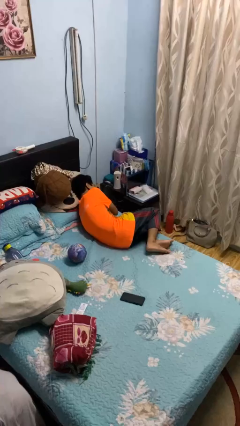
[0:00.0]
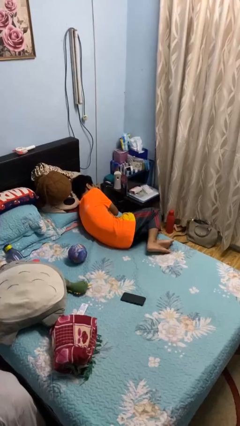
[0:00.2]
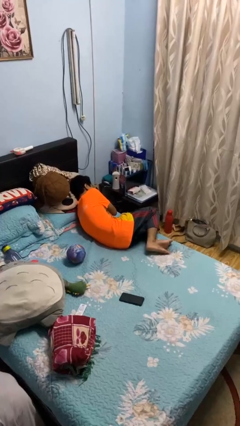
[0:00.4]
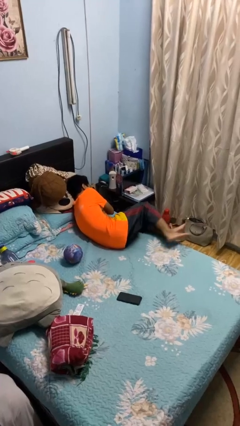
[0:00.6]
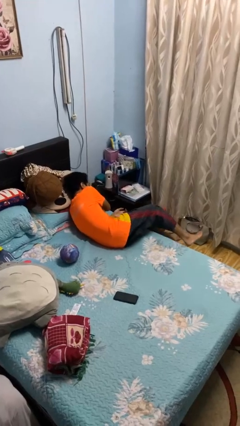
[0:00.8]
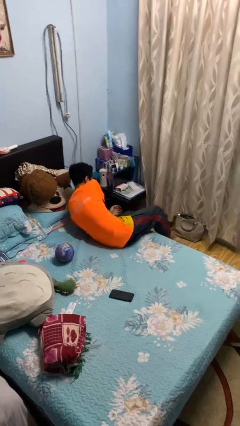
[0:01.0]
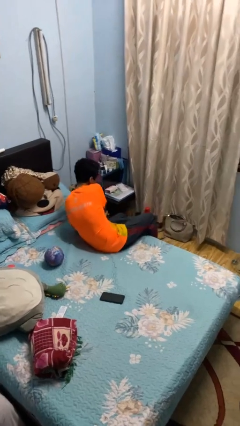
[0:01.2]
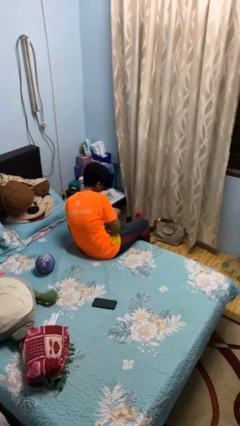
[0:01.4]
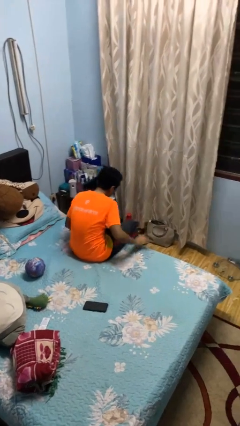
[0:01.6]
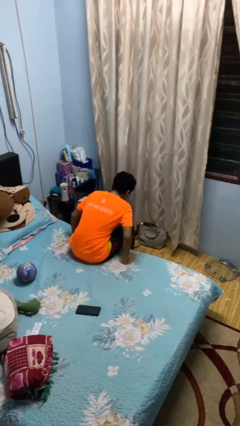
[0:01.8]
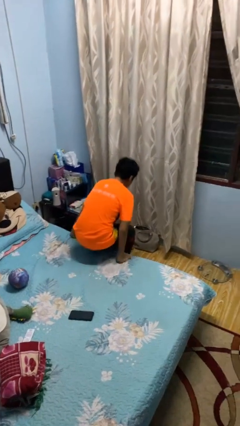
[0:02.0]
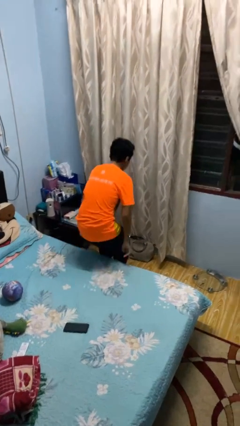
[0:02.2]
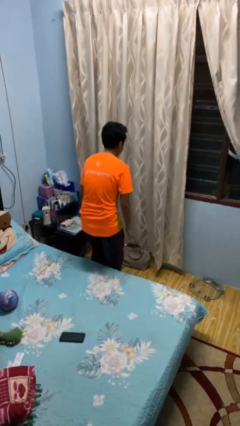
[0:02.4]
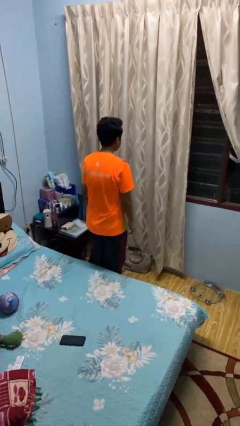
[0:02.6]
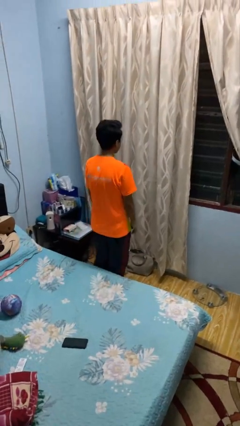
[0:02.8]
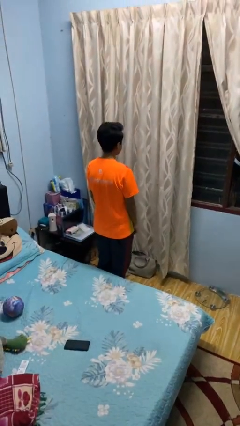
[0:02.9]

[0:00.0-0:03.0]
person stands up

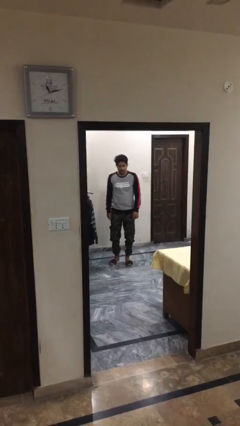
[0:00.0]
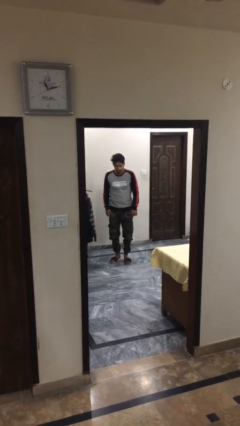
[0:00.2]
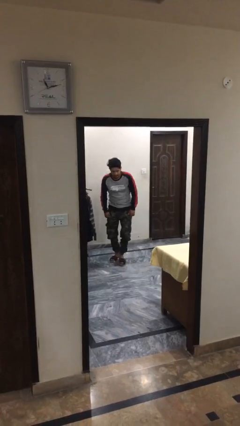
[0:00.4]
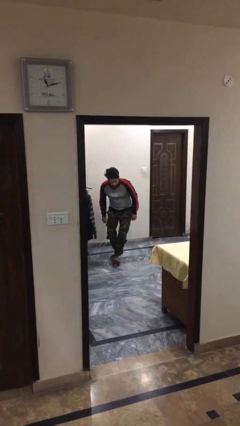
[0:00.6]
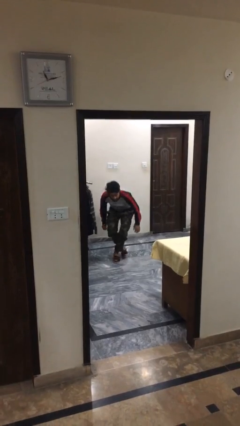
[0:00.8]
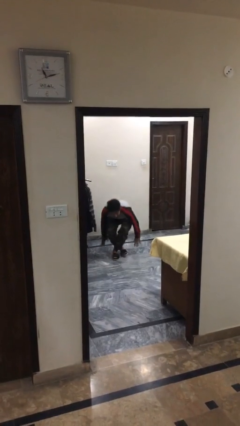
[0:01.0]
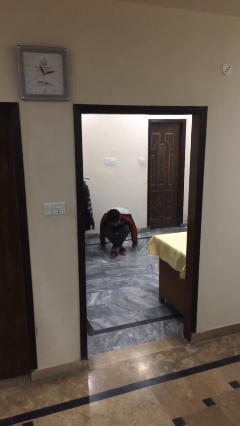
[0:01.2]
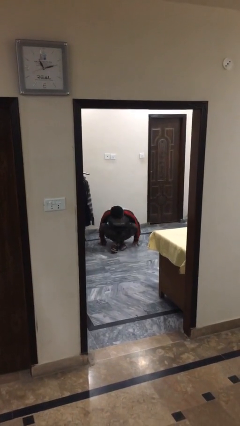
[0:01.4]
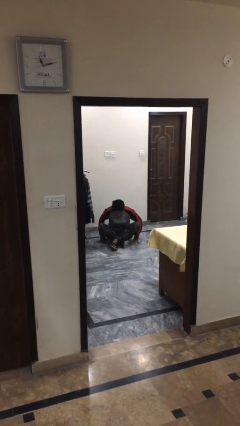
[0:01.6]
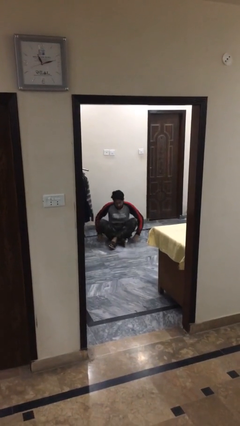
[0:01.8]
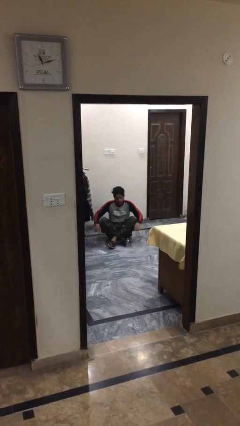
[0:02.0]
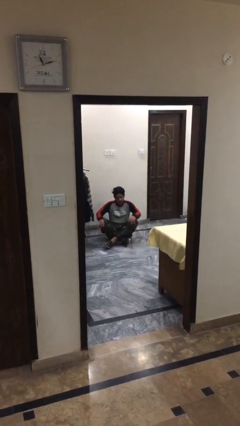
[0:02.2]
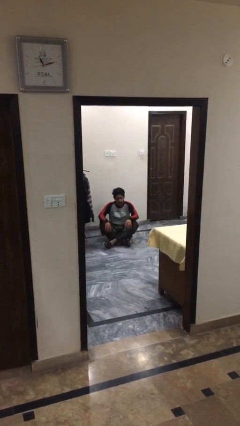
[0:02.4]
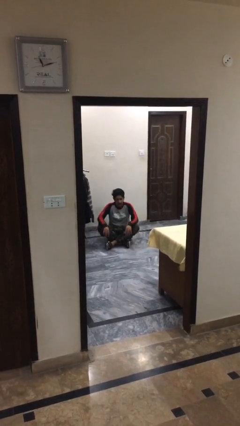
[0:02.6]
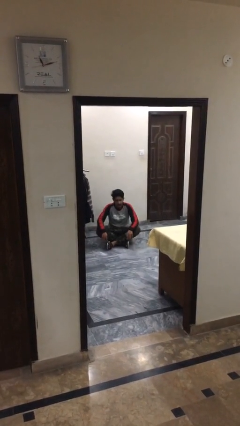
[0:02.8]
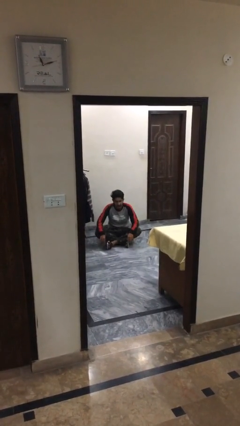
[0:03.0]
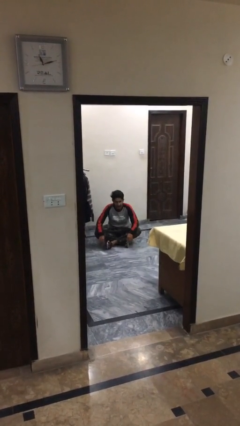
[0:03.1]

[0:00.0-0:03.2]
person sits down

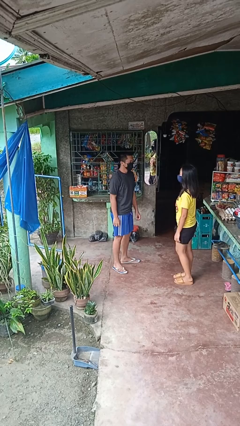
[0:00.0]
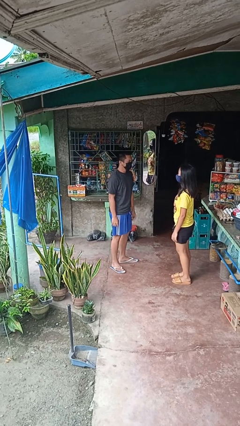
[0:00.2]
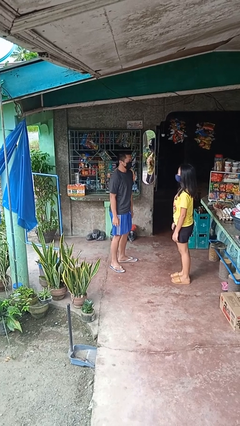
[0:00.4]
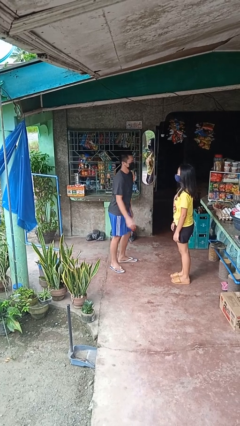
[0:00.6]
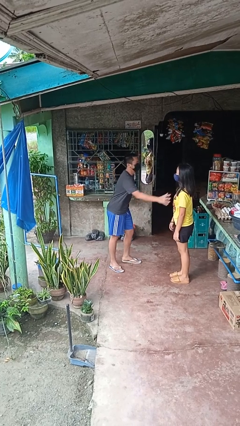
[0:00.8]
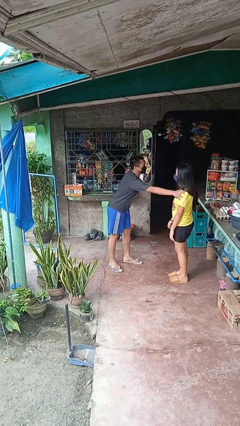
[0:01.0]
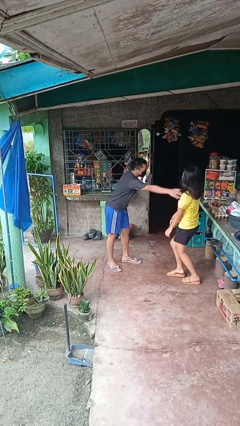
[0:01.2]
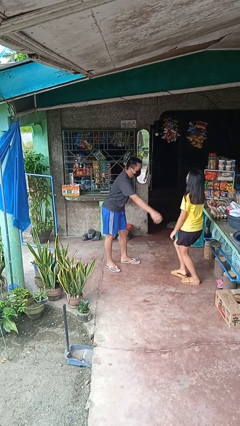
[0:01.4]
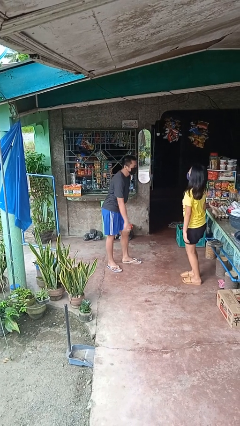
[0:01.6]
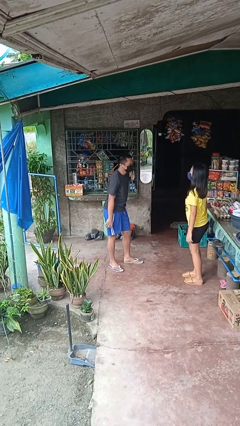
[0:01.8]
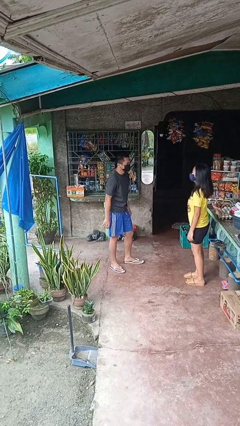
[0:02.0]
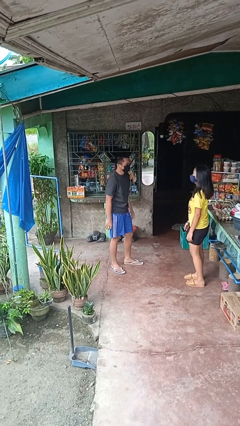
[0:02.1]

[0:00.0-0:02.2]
person shoves person

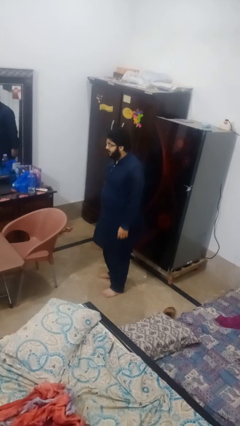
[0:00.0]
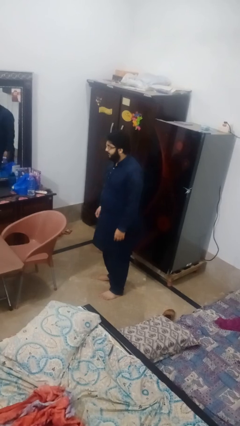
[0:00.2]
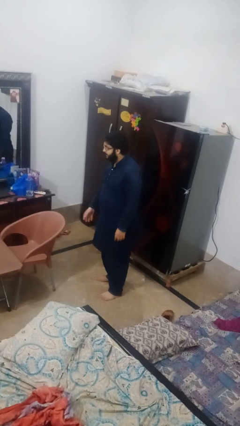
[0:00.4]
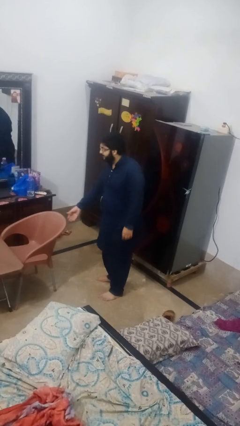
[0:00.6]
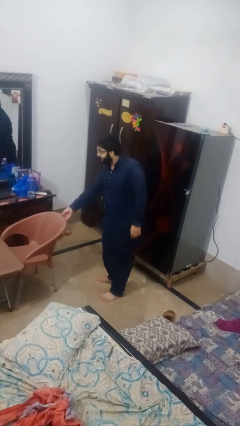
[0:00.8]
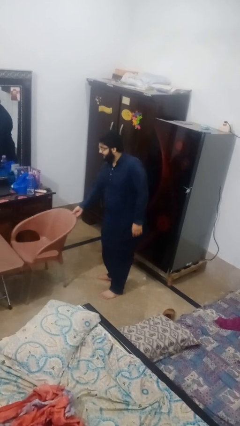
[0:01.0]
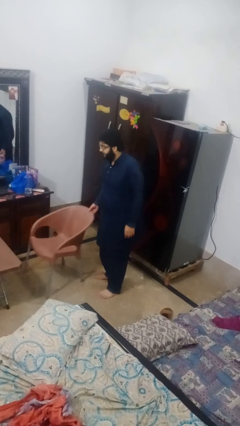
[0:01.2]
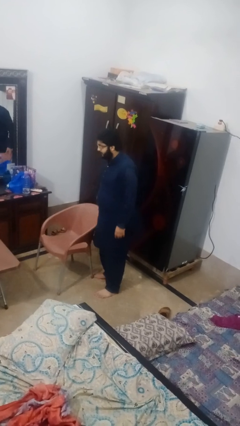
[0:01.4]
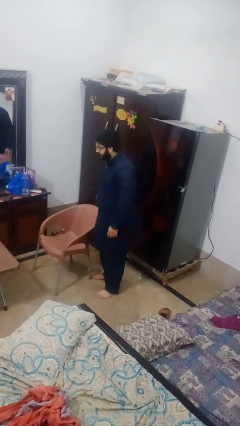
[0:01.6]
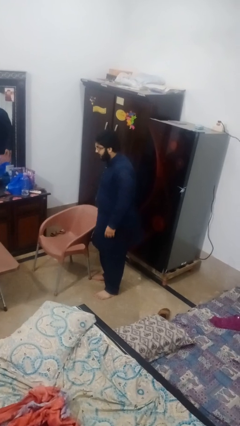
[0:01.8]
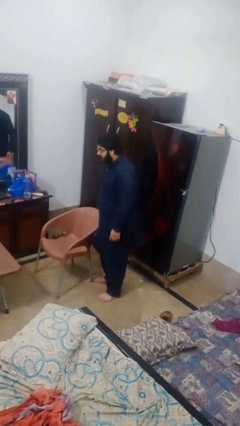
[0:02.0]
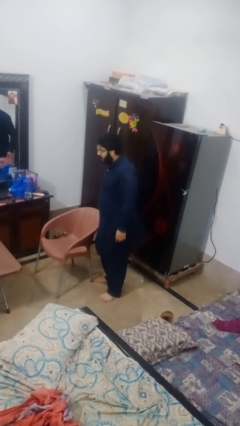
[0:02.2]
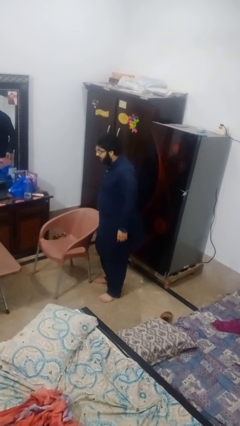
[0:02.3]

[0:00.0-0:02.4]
person pulls out chair

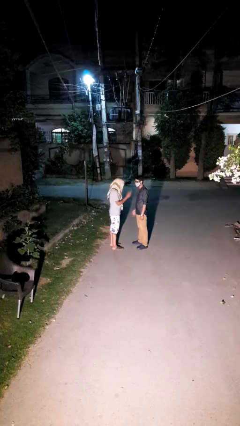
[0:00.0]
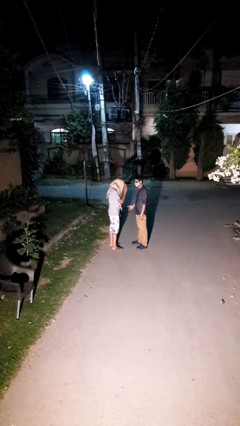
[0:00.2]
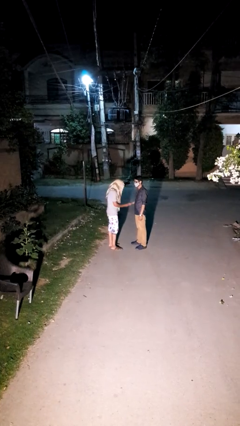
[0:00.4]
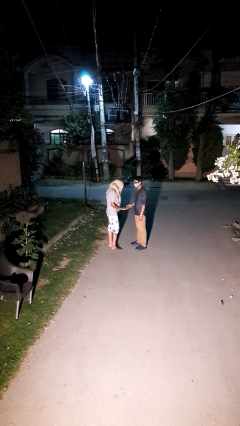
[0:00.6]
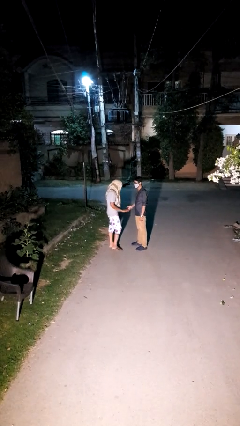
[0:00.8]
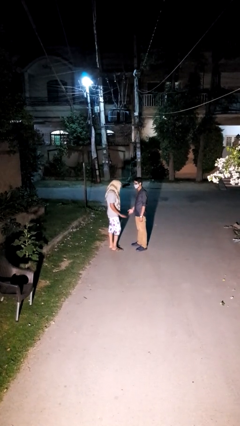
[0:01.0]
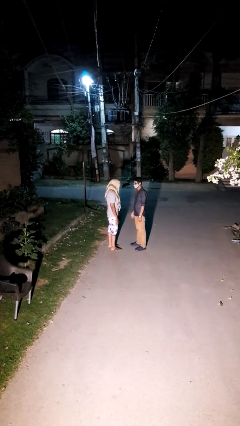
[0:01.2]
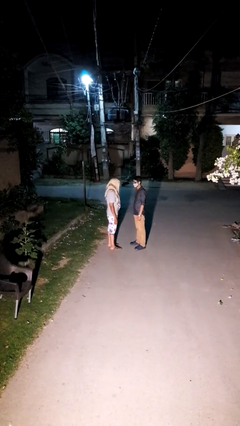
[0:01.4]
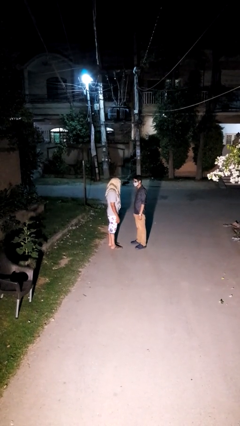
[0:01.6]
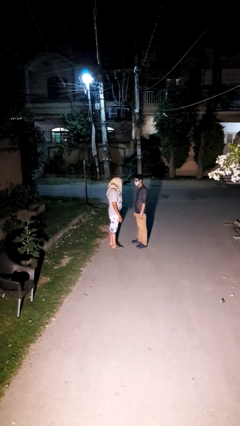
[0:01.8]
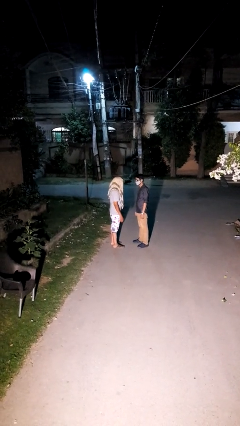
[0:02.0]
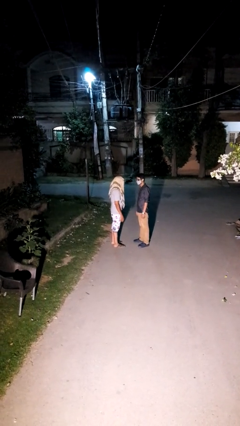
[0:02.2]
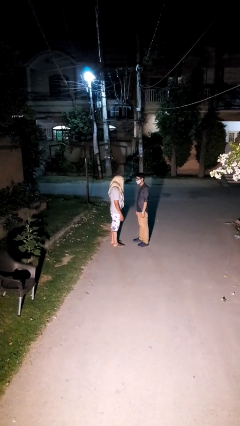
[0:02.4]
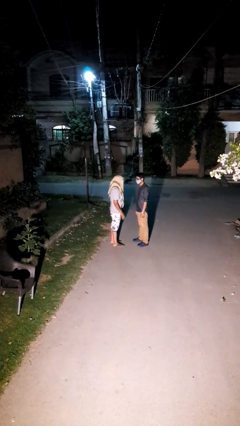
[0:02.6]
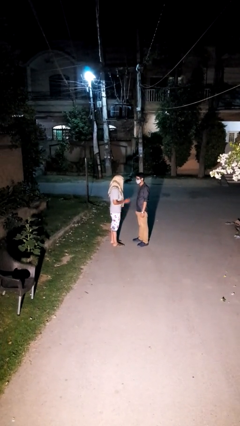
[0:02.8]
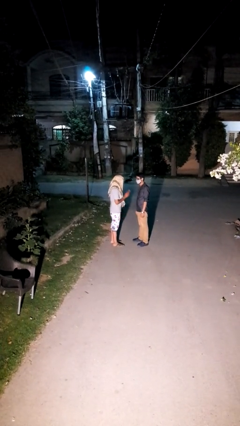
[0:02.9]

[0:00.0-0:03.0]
person highfives hand

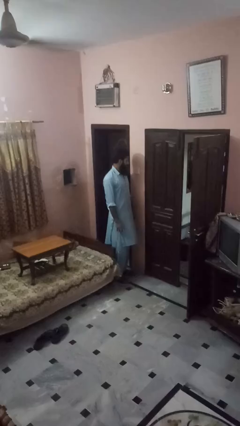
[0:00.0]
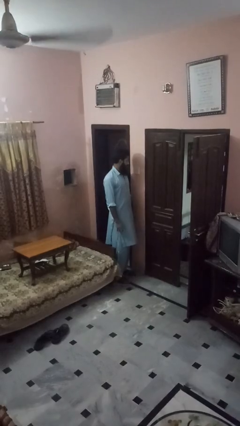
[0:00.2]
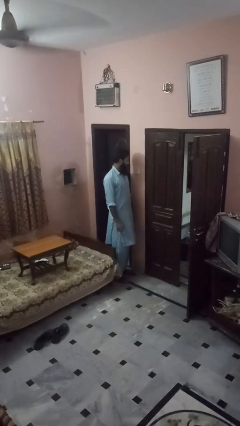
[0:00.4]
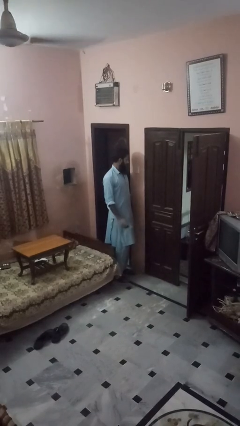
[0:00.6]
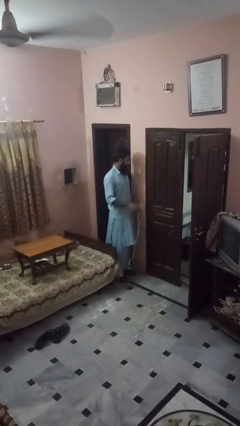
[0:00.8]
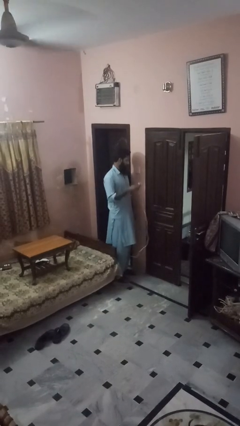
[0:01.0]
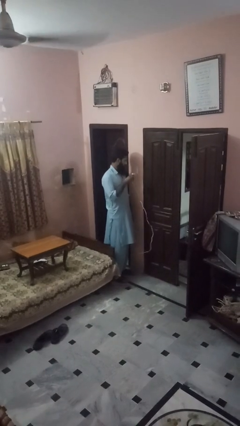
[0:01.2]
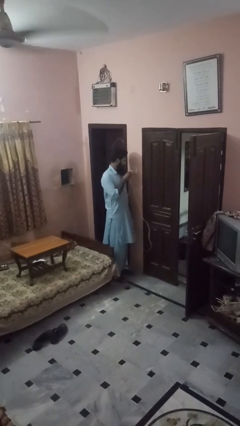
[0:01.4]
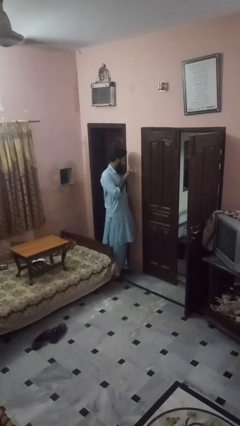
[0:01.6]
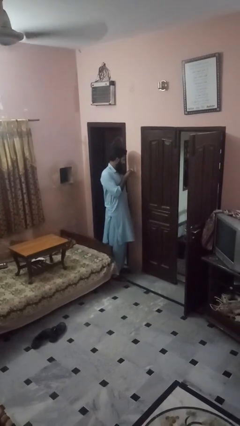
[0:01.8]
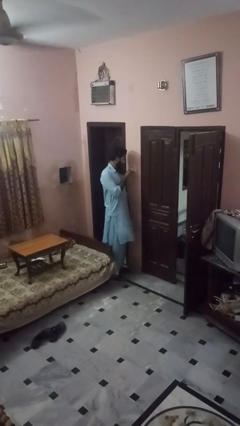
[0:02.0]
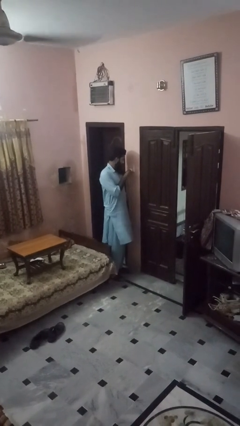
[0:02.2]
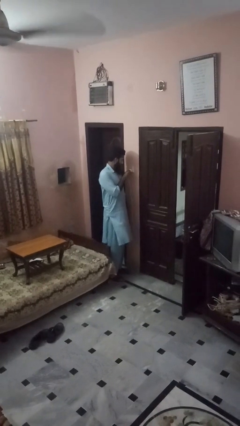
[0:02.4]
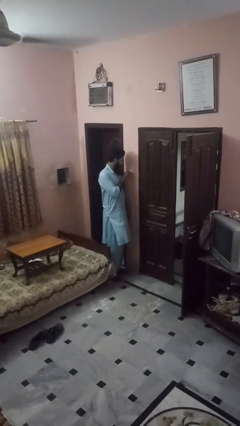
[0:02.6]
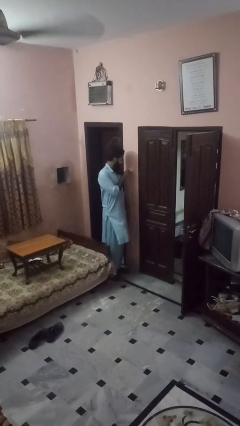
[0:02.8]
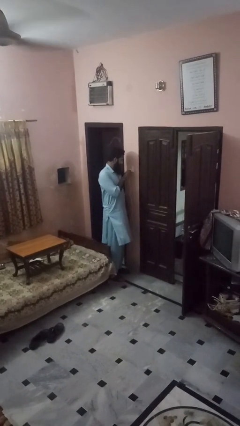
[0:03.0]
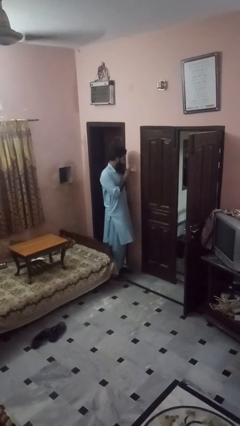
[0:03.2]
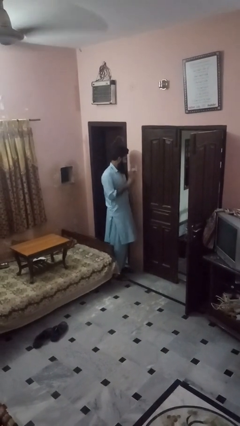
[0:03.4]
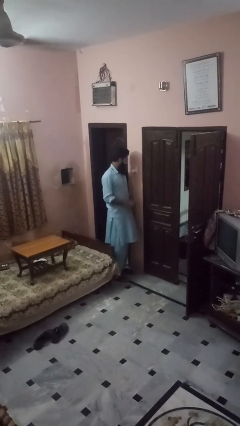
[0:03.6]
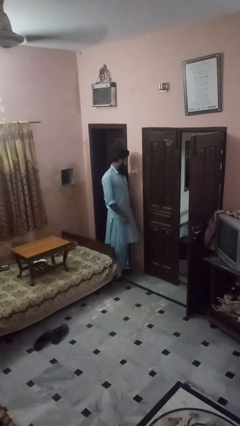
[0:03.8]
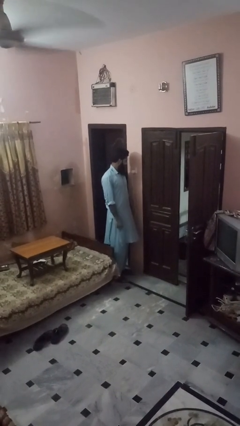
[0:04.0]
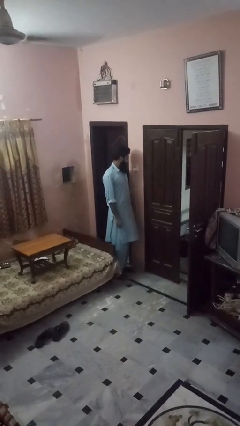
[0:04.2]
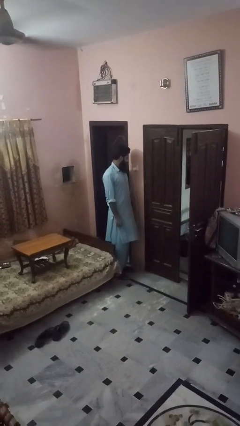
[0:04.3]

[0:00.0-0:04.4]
person plugs into electrical socket
